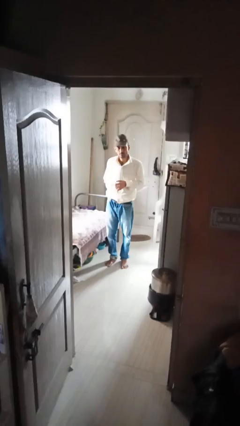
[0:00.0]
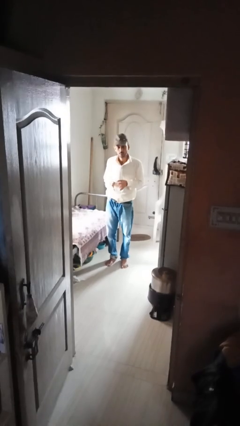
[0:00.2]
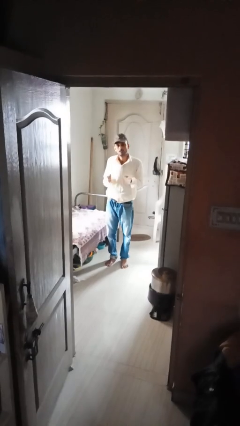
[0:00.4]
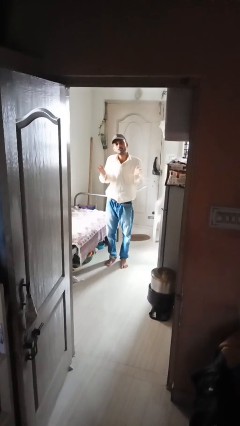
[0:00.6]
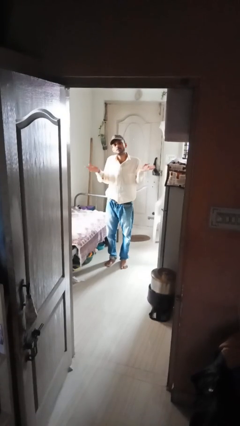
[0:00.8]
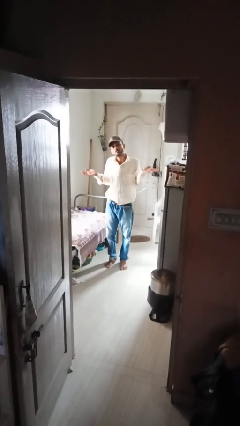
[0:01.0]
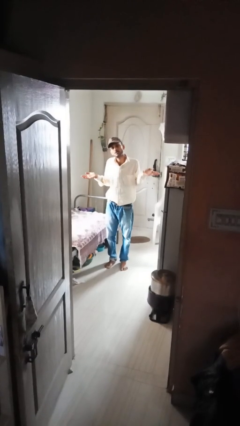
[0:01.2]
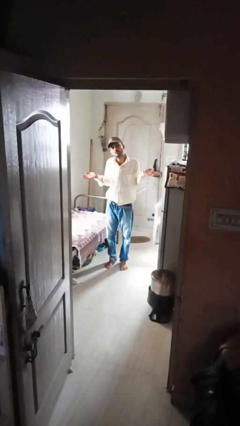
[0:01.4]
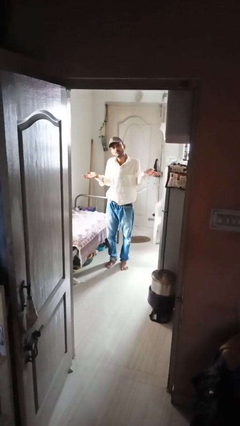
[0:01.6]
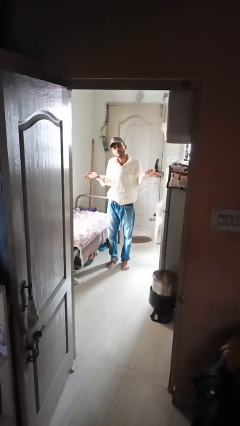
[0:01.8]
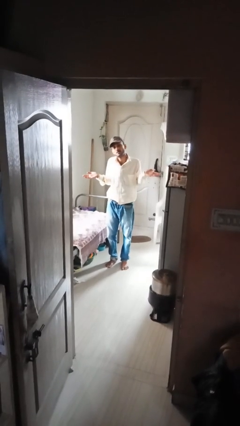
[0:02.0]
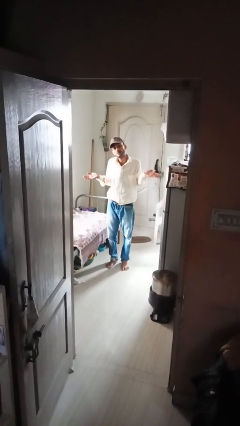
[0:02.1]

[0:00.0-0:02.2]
person shrugs

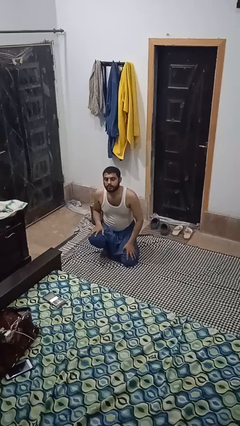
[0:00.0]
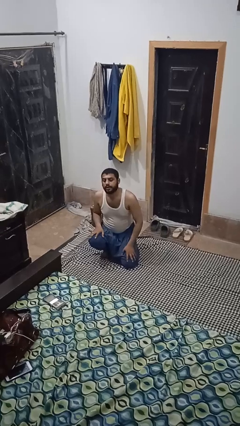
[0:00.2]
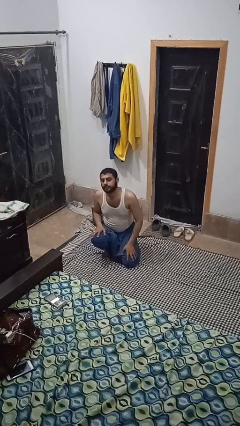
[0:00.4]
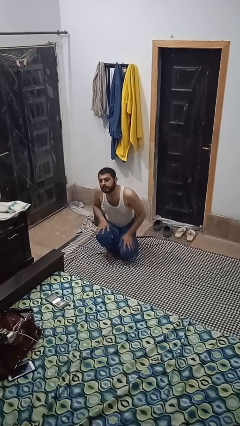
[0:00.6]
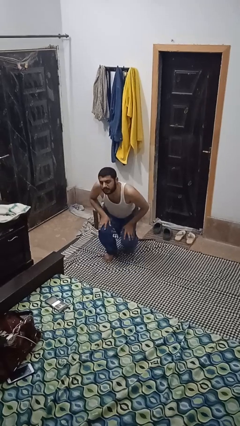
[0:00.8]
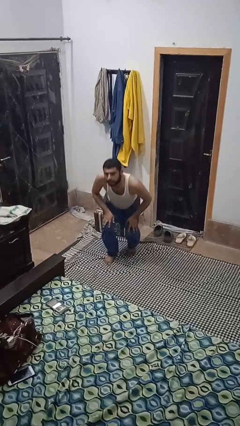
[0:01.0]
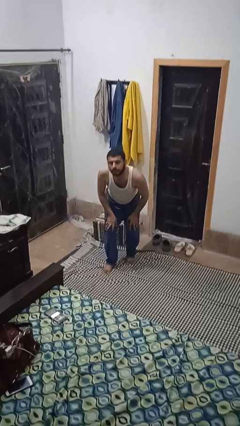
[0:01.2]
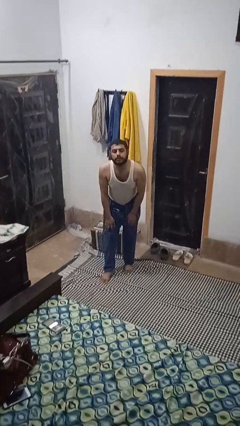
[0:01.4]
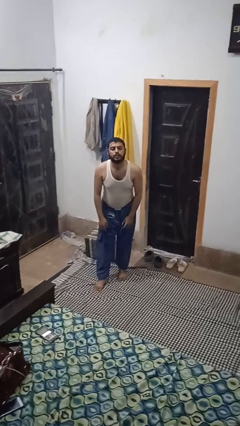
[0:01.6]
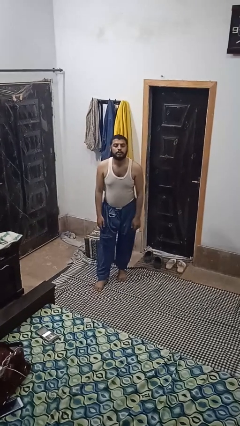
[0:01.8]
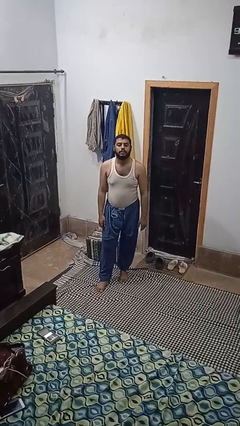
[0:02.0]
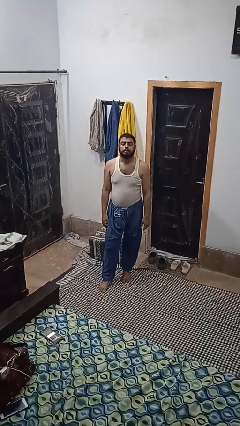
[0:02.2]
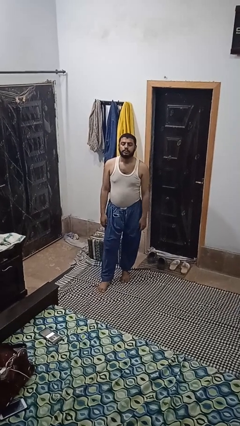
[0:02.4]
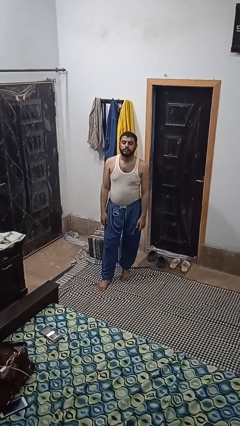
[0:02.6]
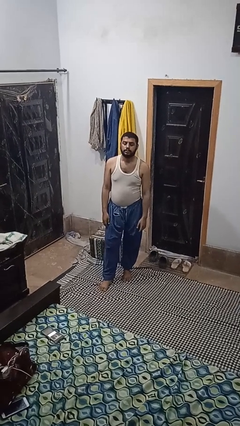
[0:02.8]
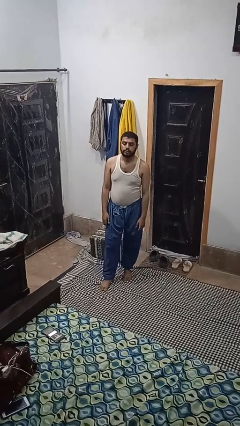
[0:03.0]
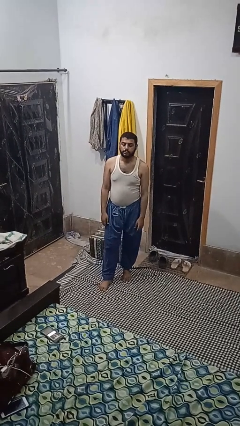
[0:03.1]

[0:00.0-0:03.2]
person stands up from floor

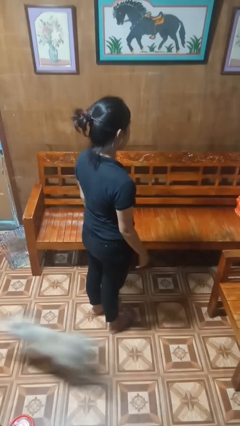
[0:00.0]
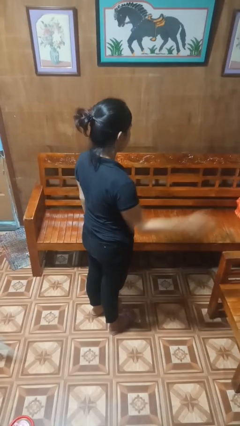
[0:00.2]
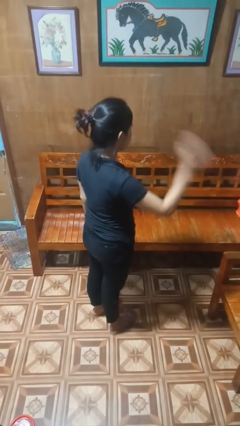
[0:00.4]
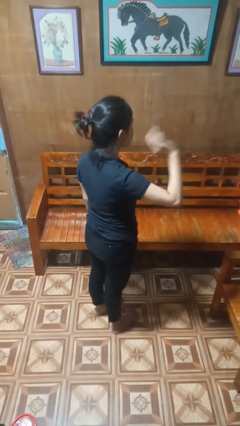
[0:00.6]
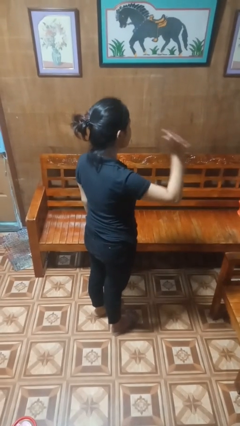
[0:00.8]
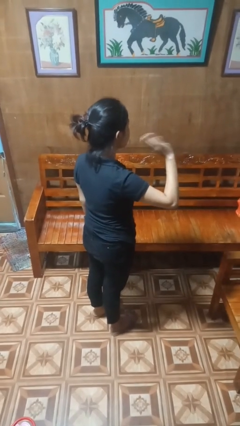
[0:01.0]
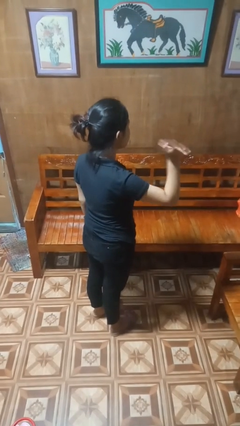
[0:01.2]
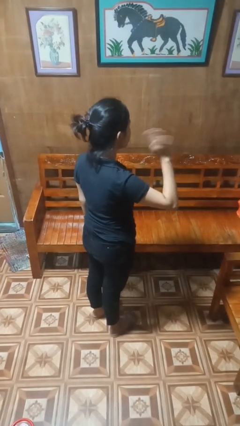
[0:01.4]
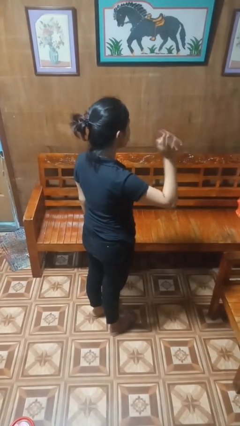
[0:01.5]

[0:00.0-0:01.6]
person waves at person

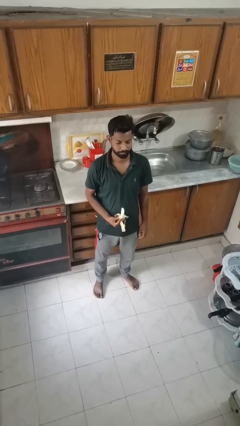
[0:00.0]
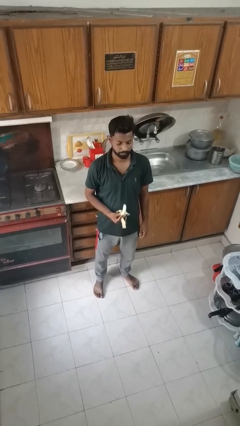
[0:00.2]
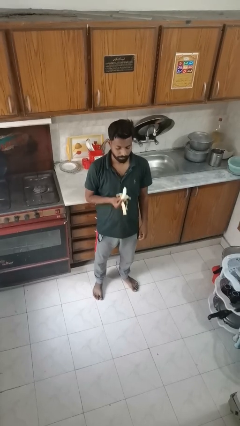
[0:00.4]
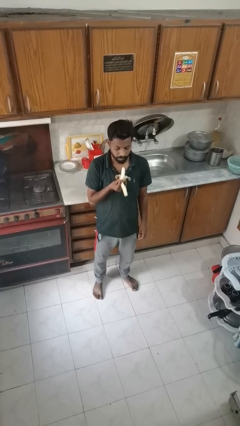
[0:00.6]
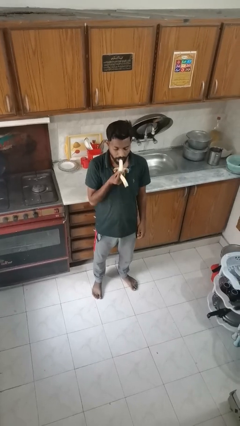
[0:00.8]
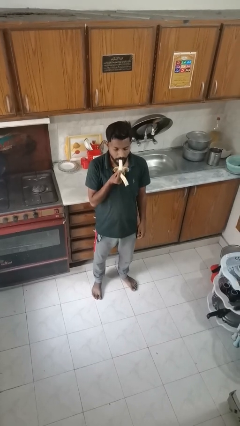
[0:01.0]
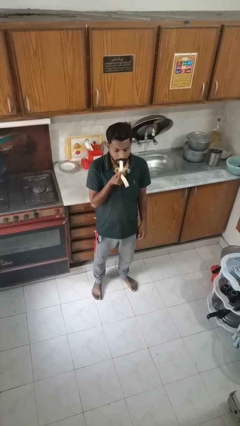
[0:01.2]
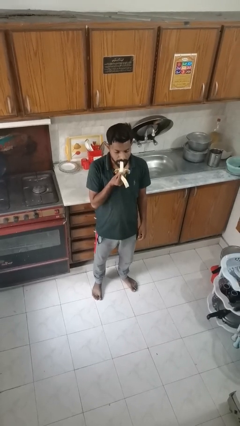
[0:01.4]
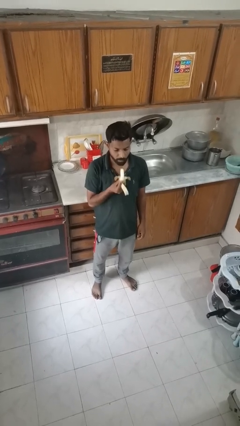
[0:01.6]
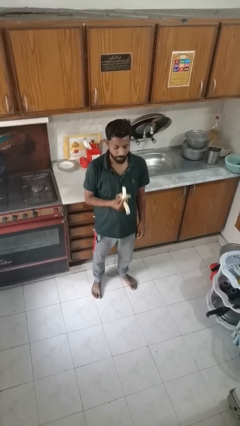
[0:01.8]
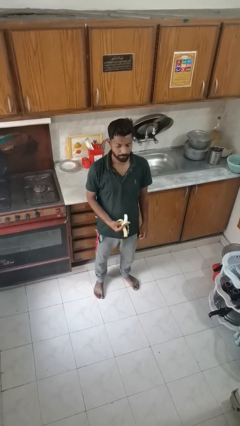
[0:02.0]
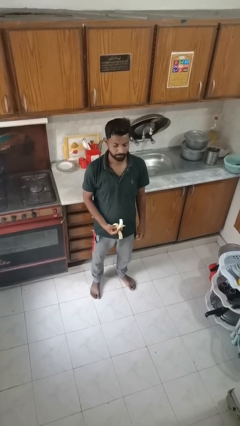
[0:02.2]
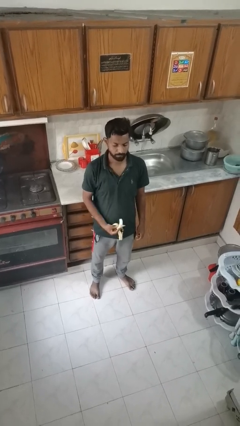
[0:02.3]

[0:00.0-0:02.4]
person eats banana

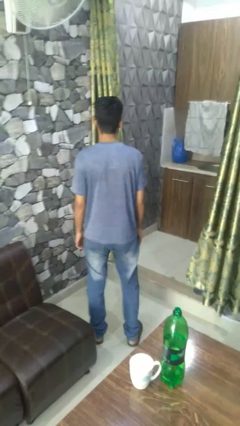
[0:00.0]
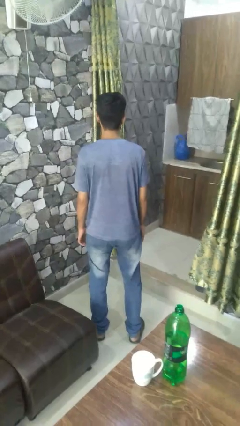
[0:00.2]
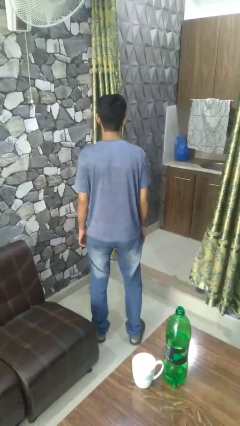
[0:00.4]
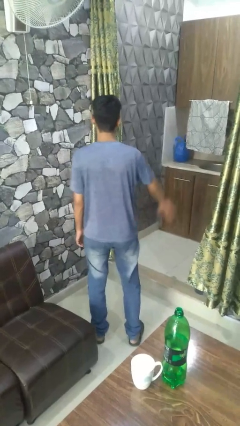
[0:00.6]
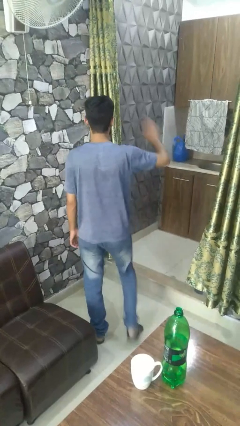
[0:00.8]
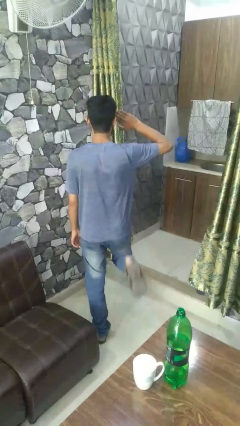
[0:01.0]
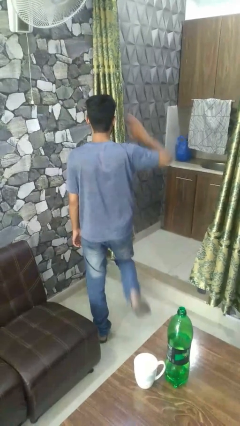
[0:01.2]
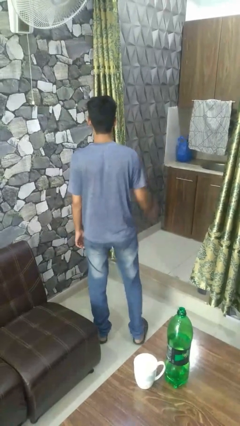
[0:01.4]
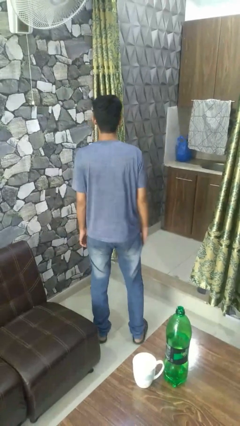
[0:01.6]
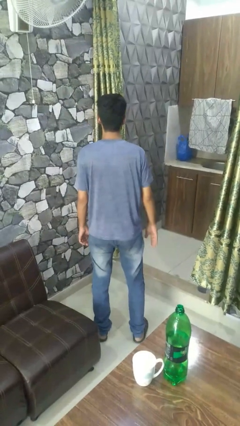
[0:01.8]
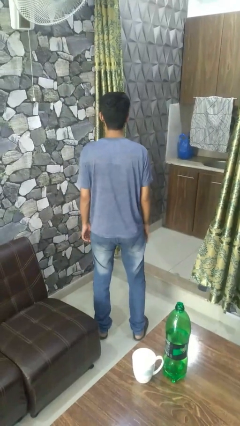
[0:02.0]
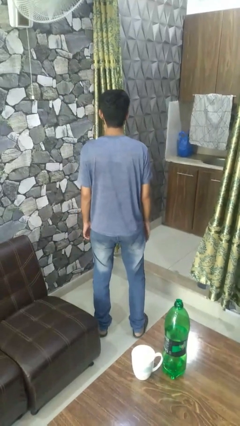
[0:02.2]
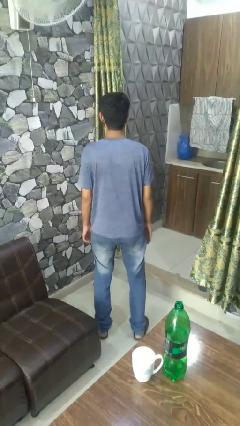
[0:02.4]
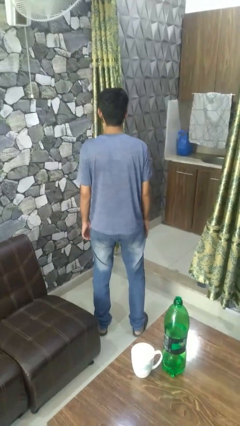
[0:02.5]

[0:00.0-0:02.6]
person salutes

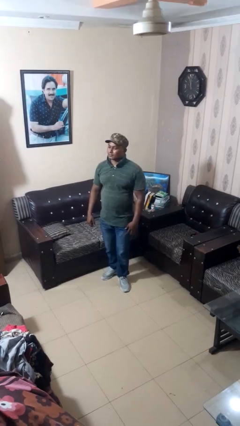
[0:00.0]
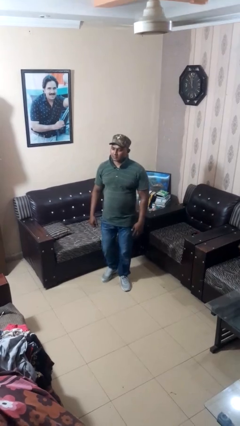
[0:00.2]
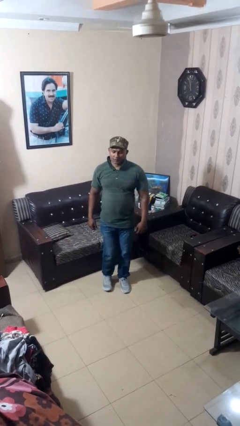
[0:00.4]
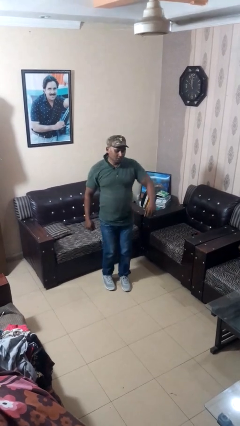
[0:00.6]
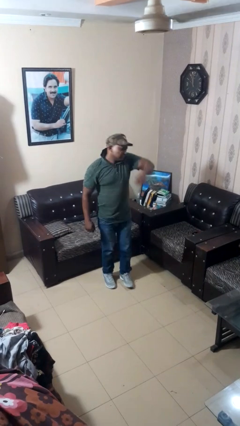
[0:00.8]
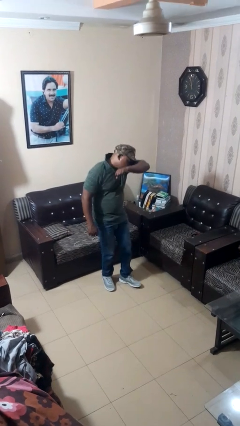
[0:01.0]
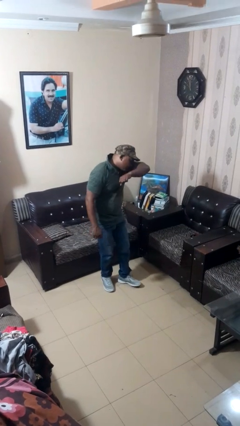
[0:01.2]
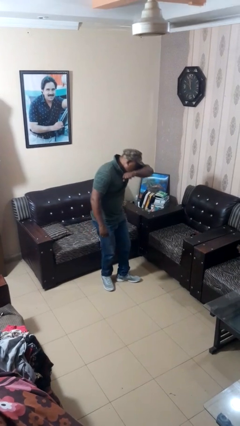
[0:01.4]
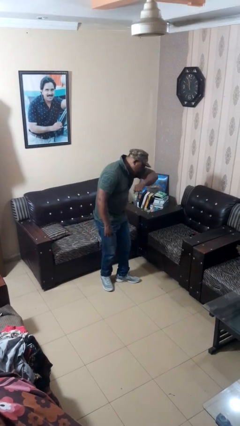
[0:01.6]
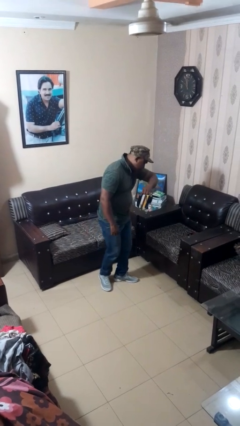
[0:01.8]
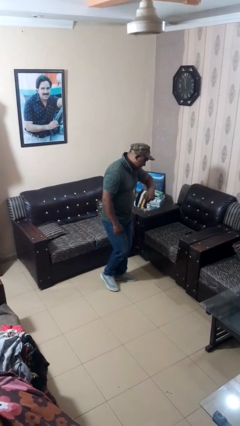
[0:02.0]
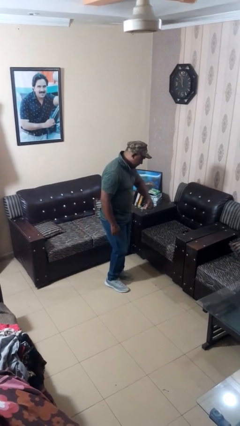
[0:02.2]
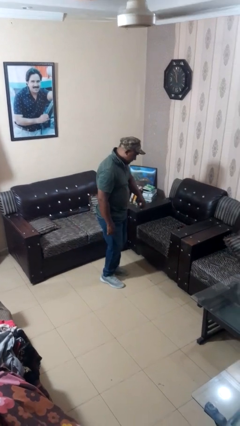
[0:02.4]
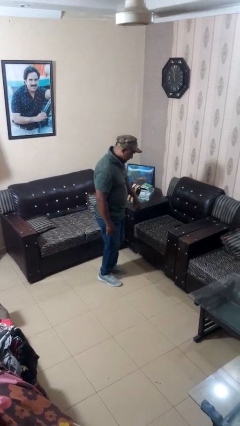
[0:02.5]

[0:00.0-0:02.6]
person sneezes into arm

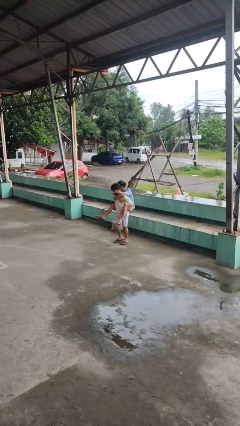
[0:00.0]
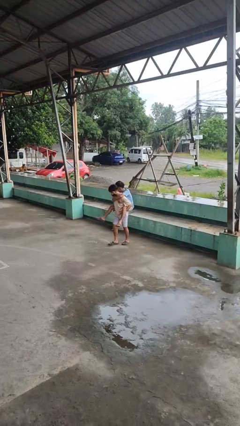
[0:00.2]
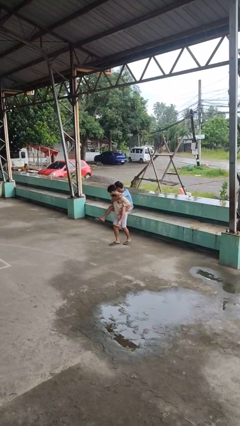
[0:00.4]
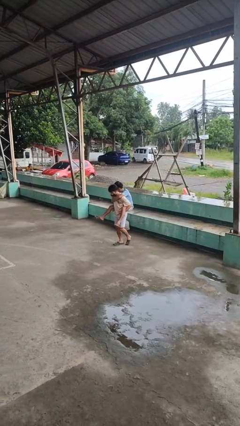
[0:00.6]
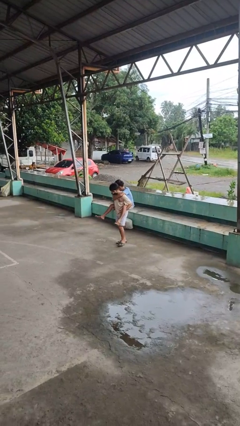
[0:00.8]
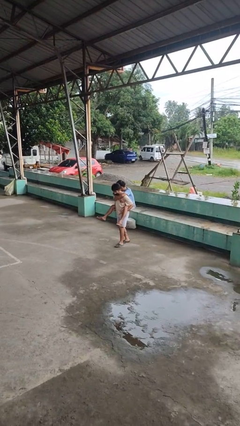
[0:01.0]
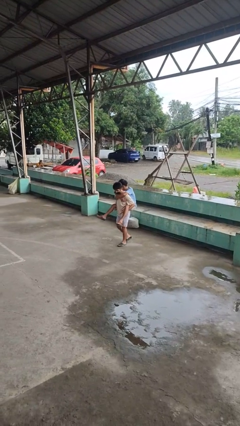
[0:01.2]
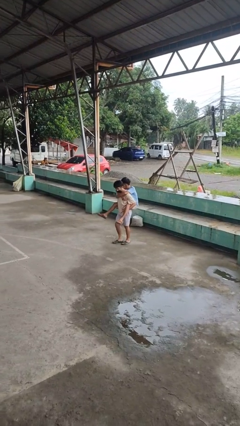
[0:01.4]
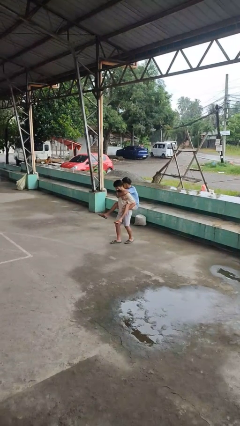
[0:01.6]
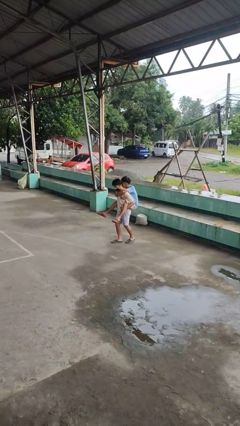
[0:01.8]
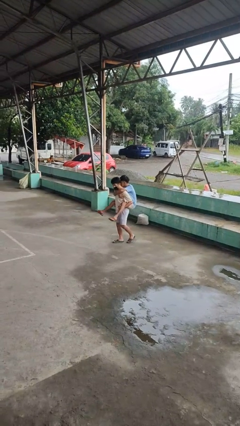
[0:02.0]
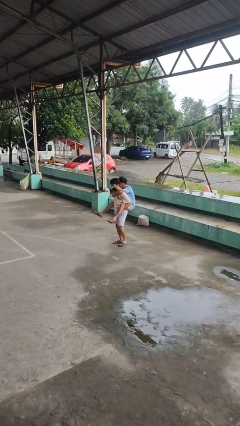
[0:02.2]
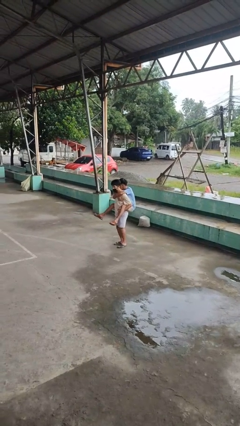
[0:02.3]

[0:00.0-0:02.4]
person carries person on back
